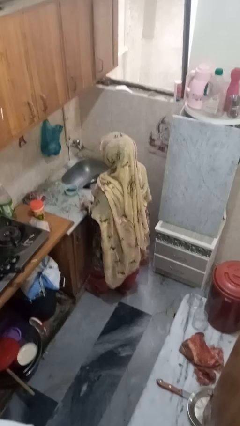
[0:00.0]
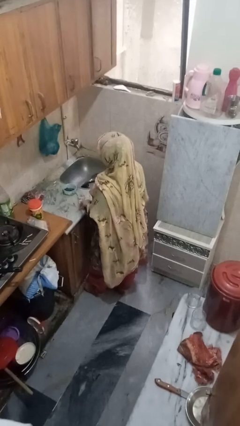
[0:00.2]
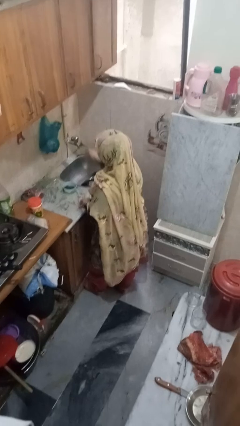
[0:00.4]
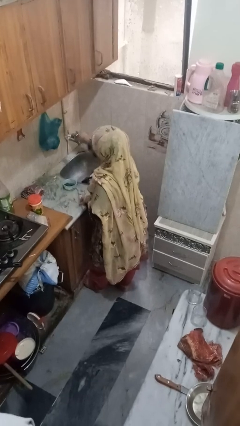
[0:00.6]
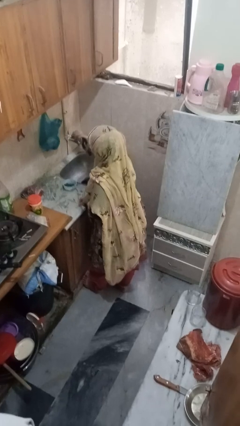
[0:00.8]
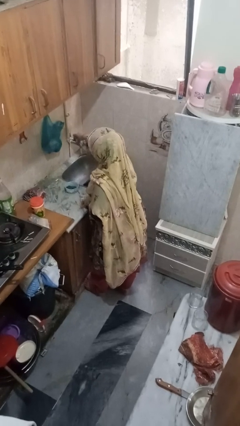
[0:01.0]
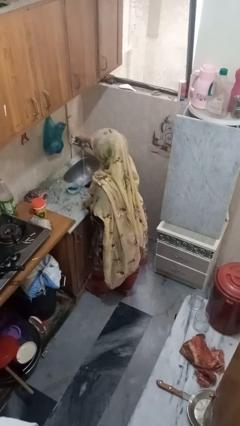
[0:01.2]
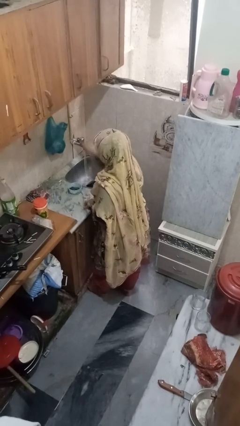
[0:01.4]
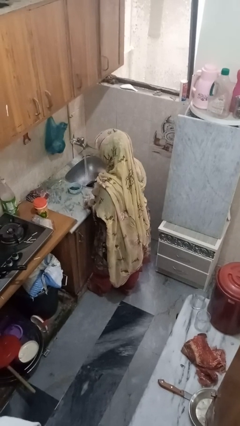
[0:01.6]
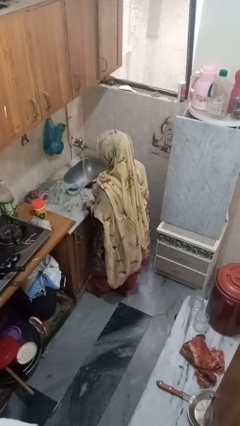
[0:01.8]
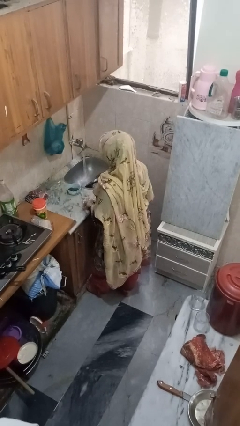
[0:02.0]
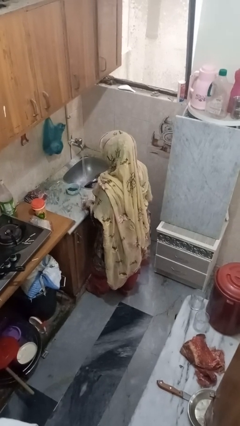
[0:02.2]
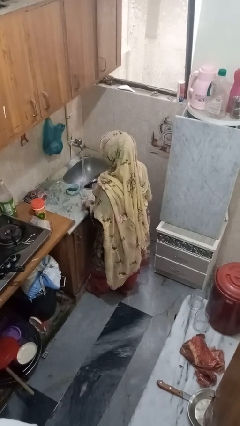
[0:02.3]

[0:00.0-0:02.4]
person turns on faucet

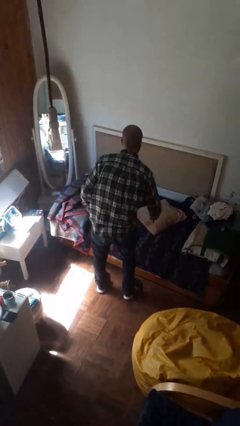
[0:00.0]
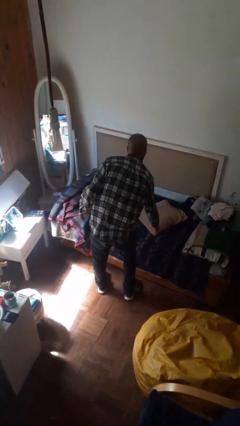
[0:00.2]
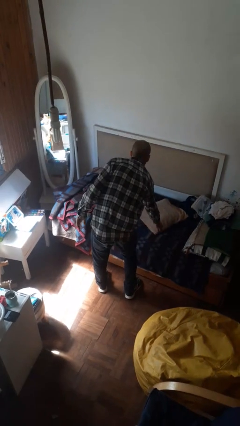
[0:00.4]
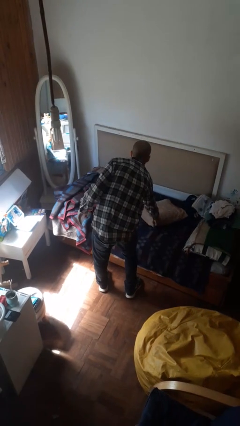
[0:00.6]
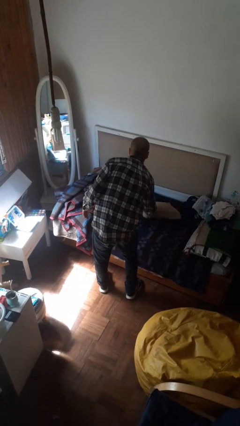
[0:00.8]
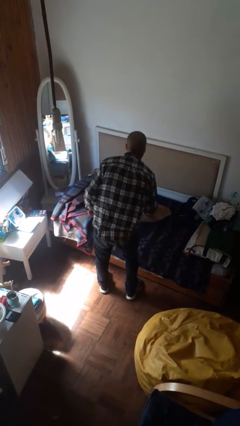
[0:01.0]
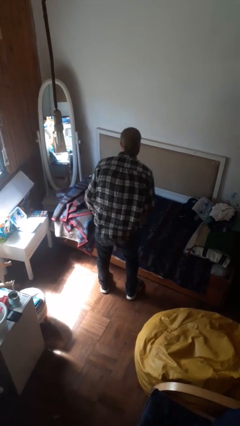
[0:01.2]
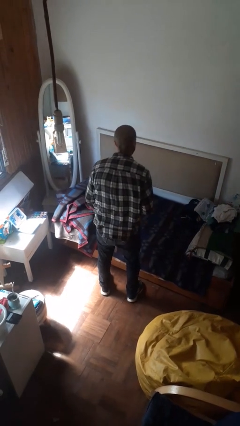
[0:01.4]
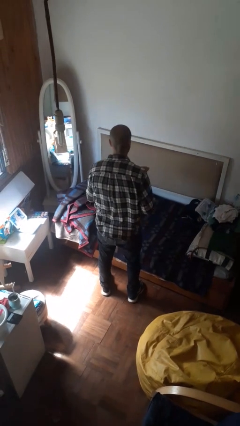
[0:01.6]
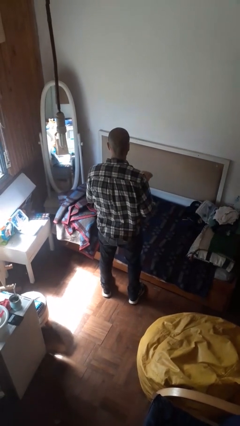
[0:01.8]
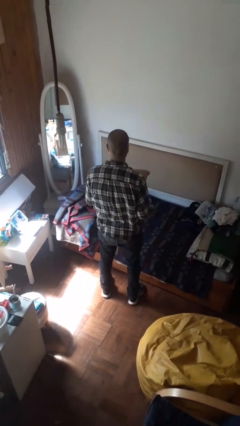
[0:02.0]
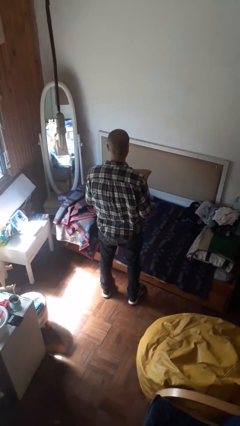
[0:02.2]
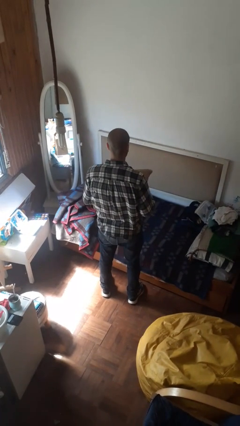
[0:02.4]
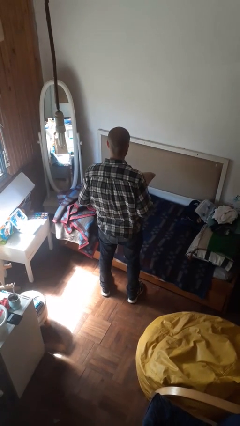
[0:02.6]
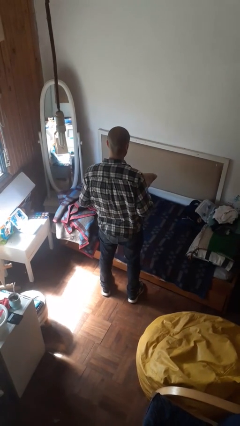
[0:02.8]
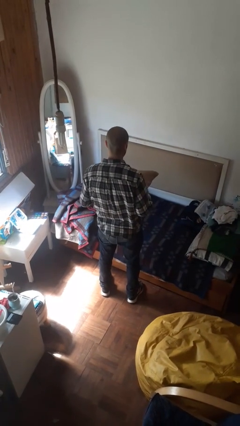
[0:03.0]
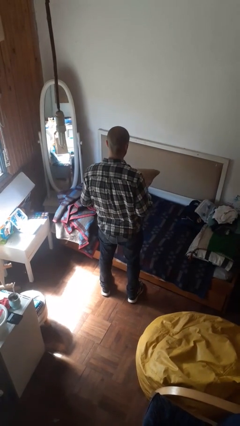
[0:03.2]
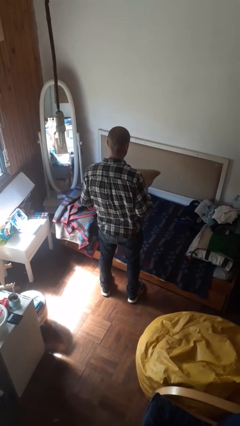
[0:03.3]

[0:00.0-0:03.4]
person picks up object from bed

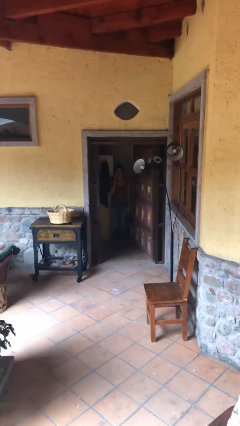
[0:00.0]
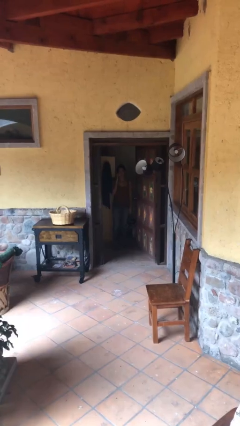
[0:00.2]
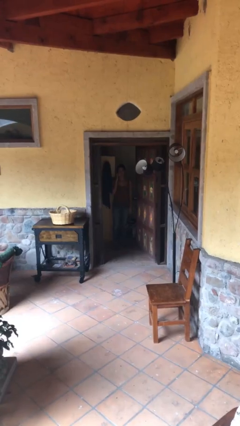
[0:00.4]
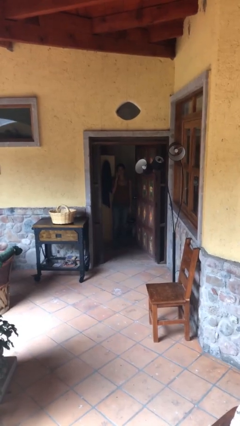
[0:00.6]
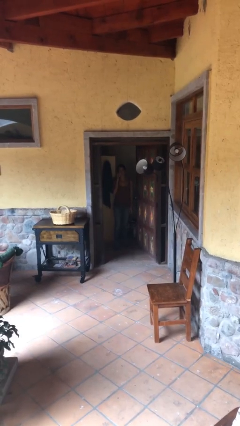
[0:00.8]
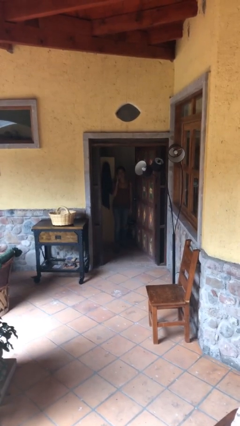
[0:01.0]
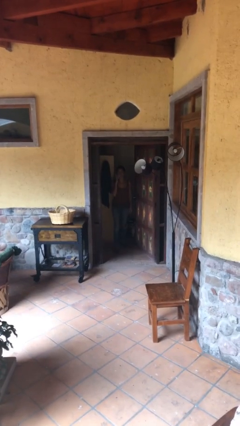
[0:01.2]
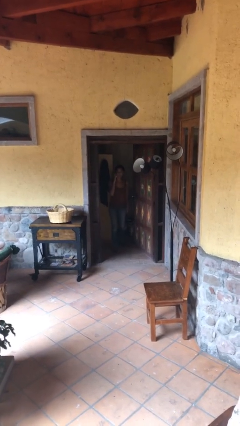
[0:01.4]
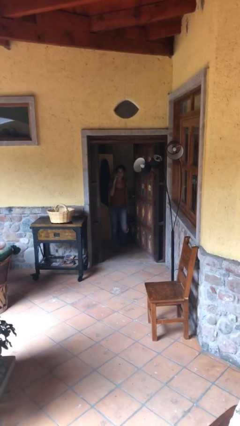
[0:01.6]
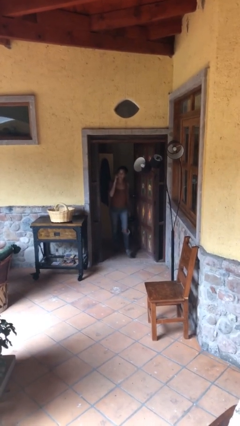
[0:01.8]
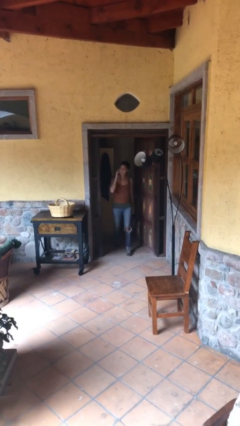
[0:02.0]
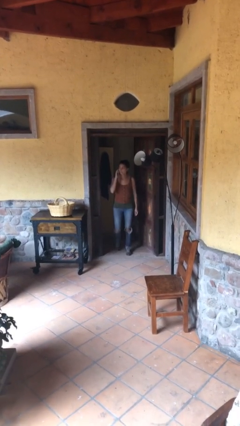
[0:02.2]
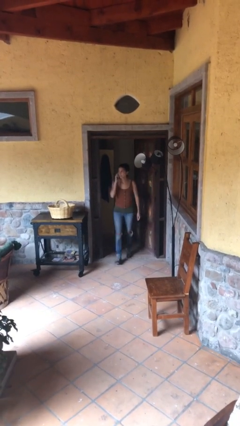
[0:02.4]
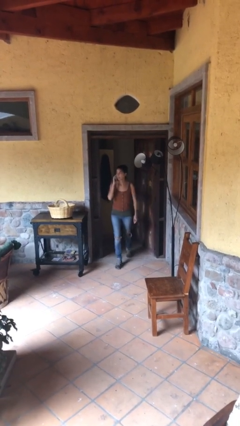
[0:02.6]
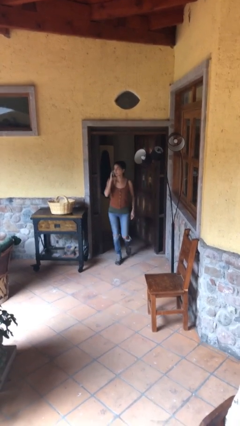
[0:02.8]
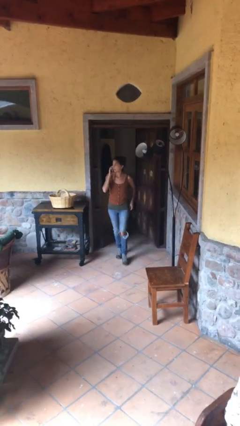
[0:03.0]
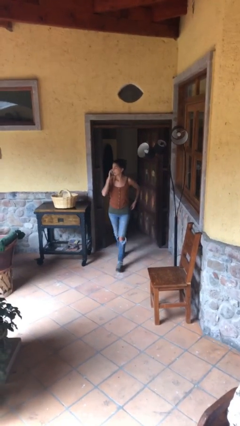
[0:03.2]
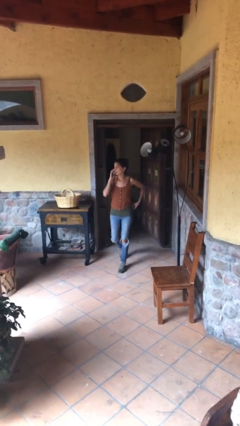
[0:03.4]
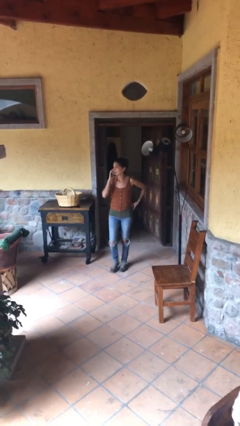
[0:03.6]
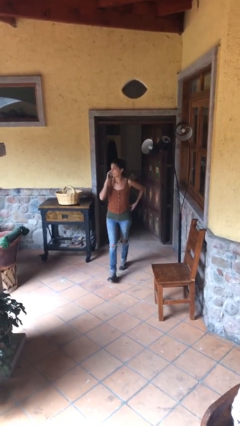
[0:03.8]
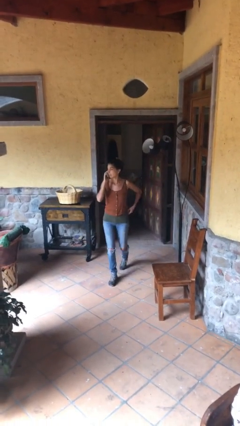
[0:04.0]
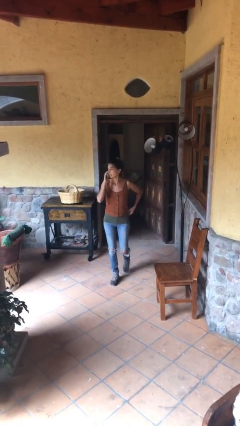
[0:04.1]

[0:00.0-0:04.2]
person enters scene through structure

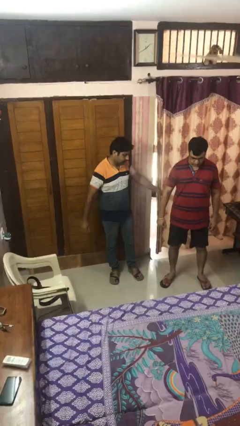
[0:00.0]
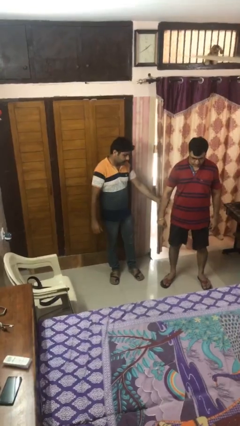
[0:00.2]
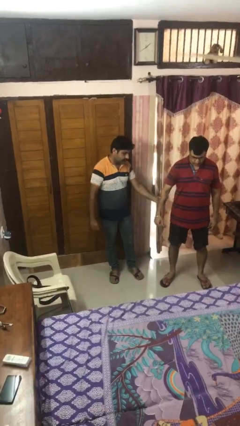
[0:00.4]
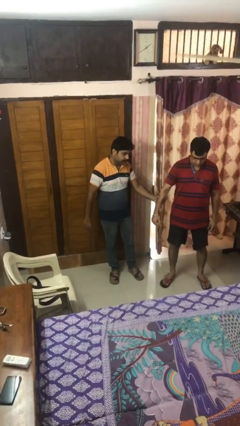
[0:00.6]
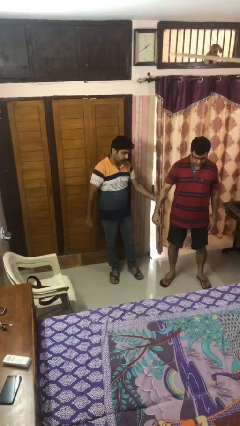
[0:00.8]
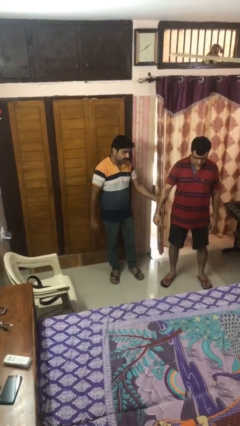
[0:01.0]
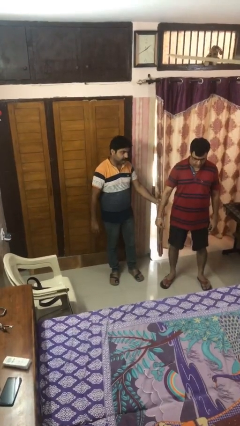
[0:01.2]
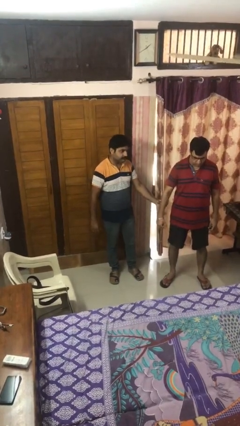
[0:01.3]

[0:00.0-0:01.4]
person grabs person by forearm

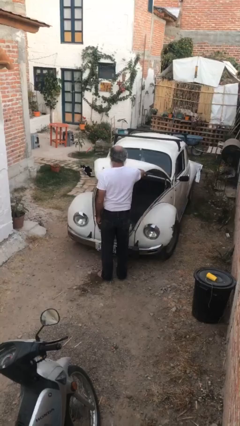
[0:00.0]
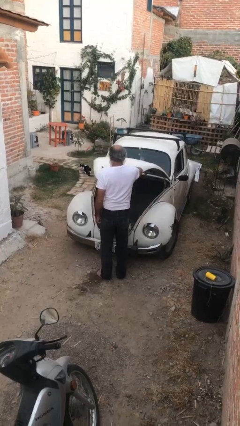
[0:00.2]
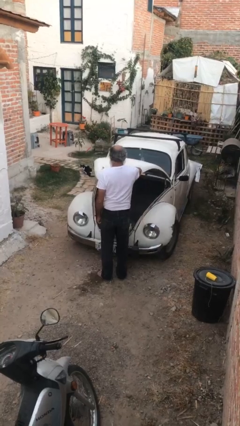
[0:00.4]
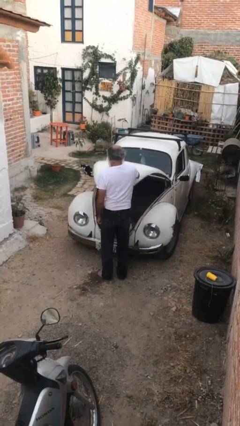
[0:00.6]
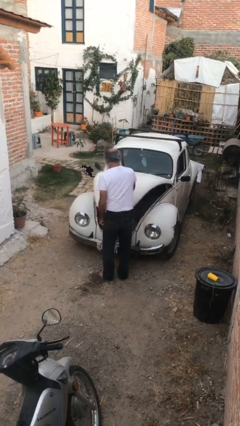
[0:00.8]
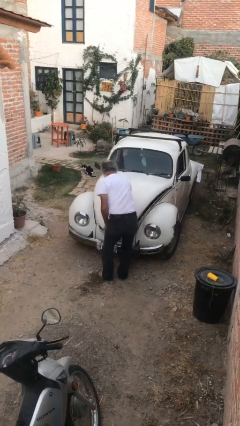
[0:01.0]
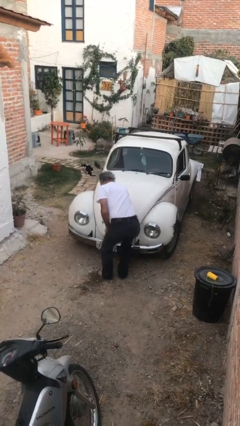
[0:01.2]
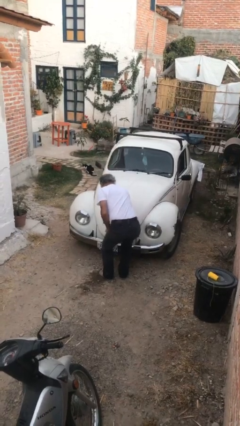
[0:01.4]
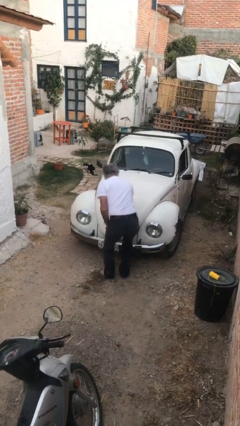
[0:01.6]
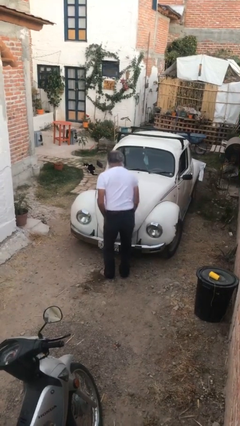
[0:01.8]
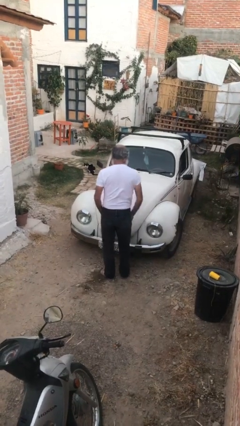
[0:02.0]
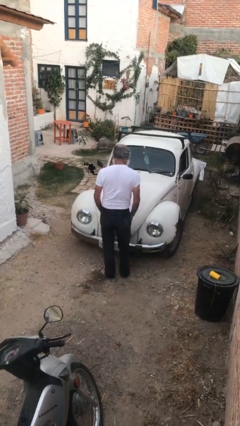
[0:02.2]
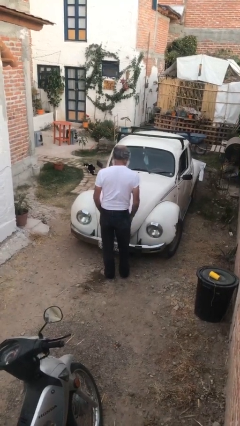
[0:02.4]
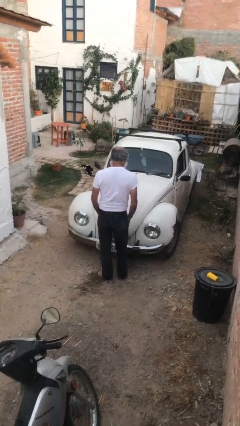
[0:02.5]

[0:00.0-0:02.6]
person closes car trunk

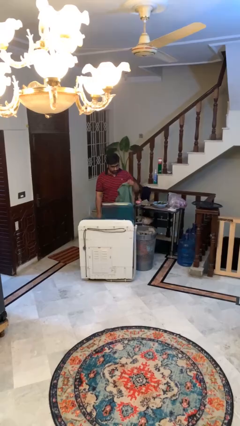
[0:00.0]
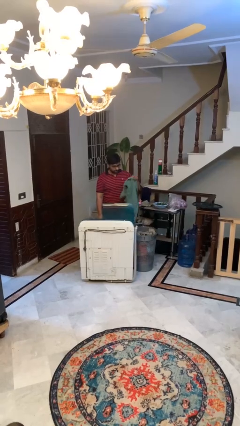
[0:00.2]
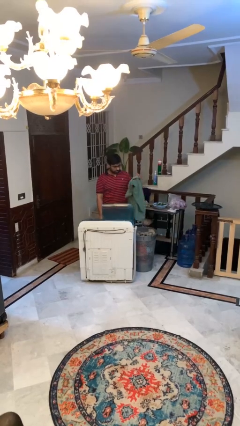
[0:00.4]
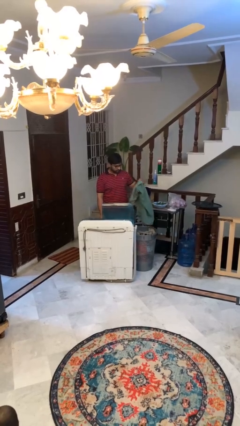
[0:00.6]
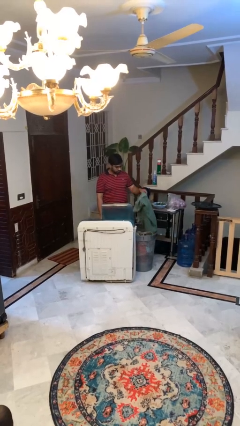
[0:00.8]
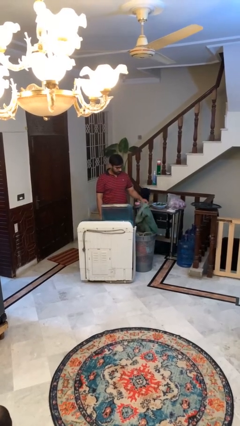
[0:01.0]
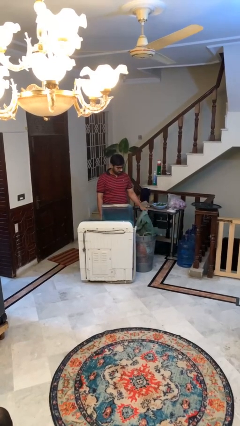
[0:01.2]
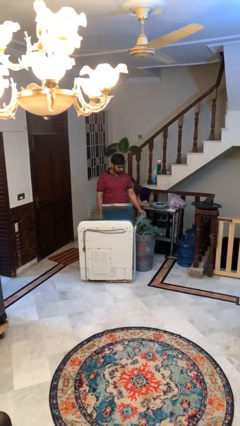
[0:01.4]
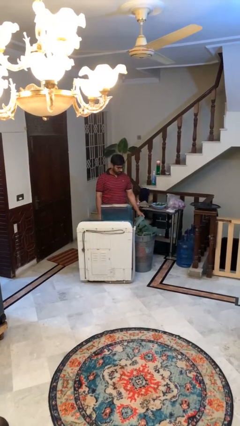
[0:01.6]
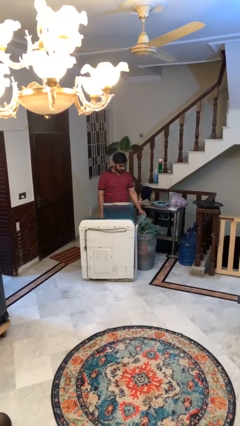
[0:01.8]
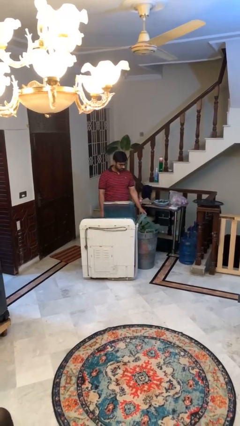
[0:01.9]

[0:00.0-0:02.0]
person unloads clotheswasher

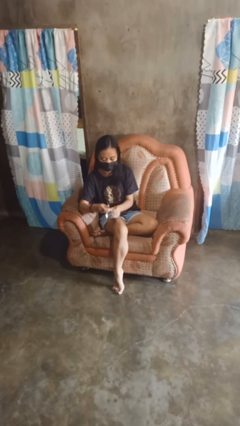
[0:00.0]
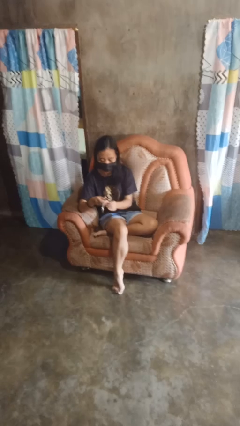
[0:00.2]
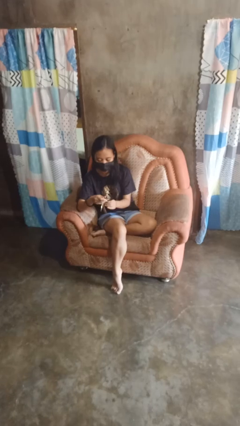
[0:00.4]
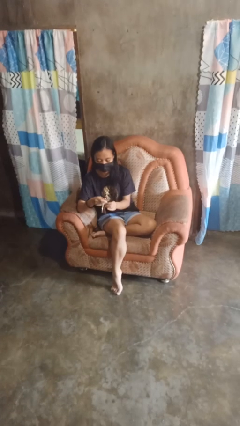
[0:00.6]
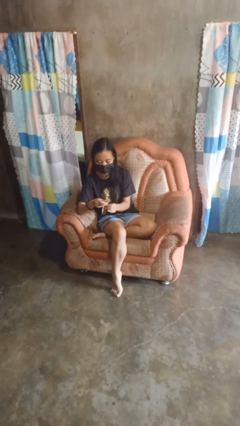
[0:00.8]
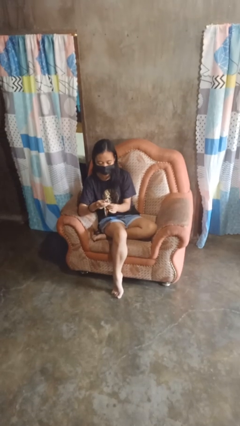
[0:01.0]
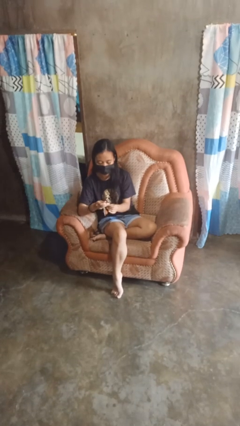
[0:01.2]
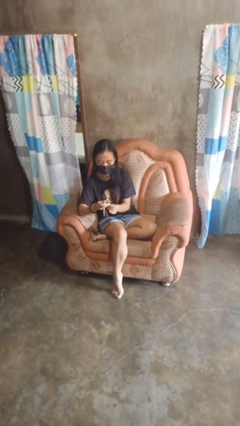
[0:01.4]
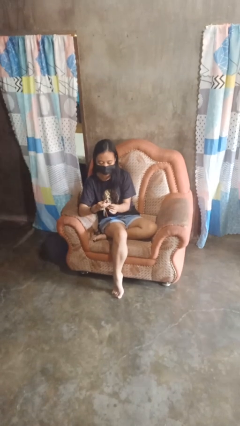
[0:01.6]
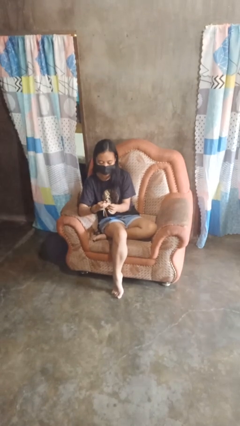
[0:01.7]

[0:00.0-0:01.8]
person clips fingernails
